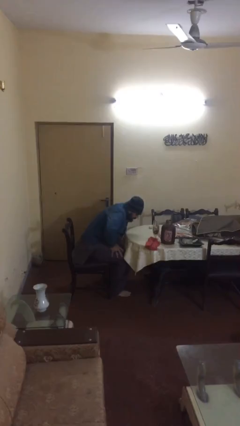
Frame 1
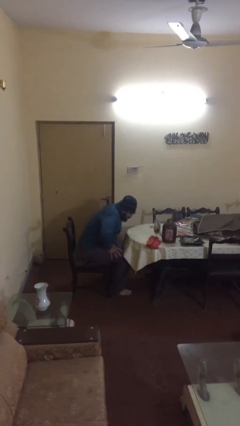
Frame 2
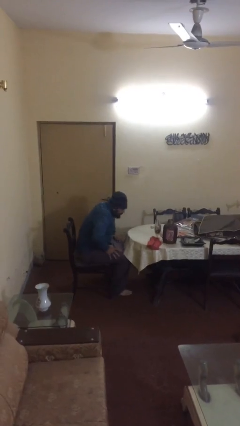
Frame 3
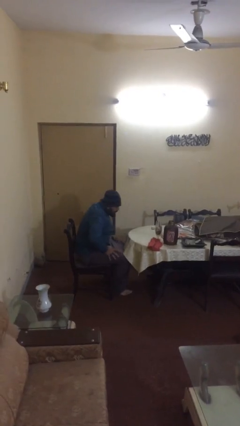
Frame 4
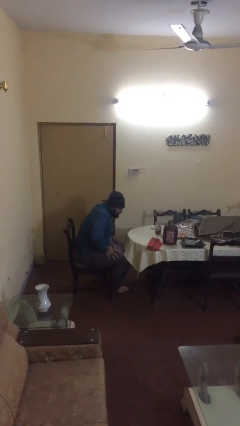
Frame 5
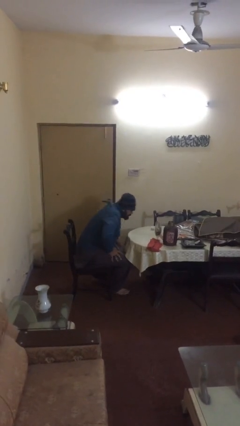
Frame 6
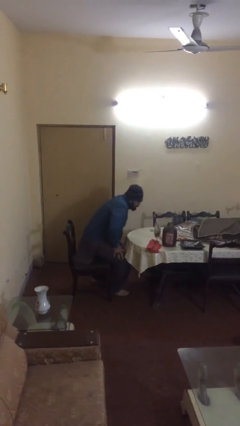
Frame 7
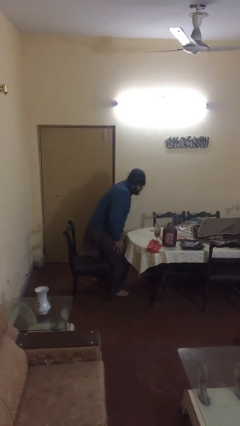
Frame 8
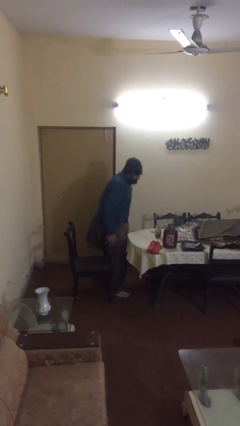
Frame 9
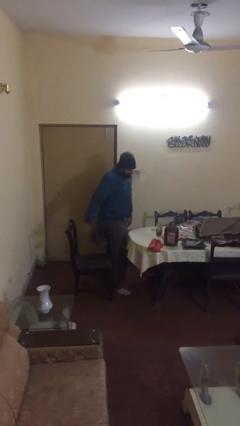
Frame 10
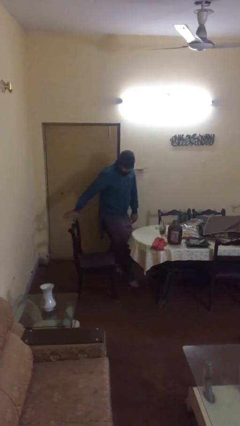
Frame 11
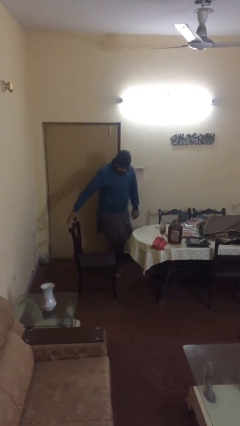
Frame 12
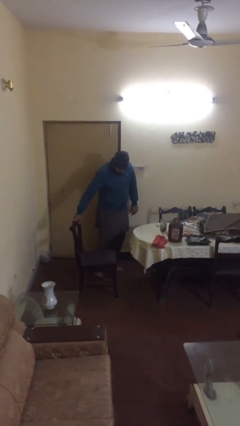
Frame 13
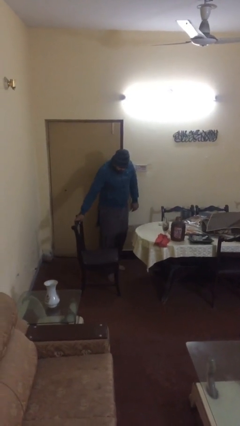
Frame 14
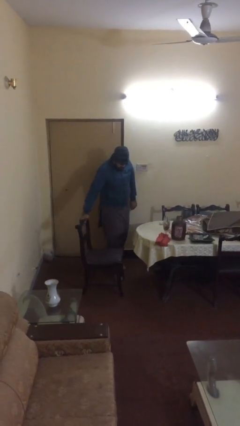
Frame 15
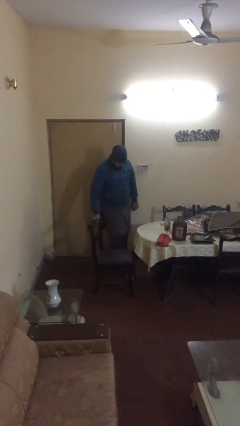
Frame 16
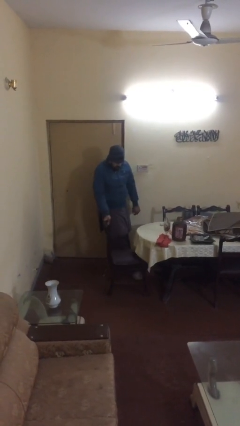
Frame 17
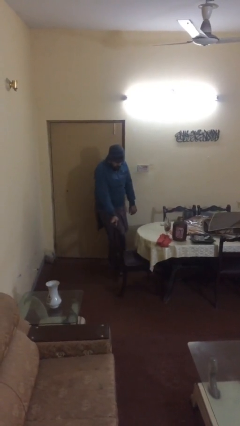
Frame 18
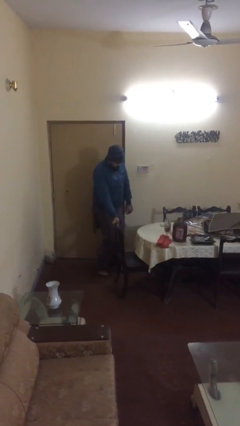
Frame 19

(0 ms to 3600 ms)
person stands up

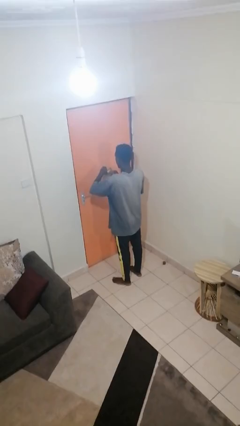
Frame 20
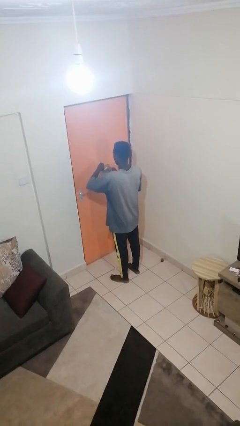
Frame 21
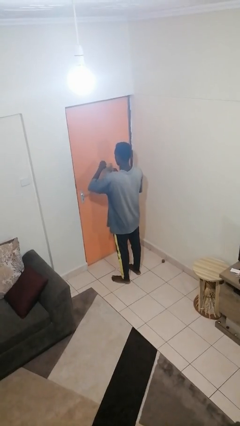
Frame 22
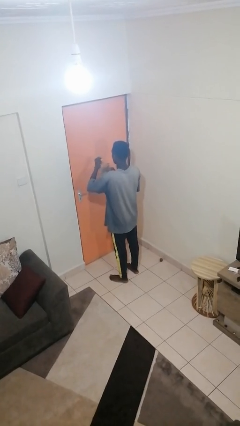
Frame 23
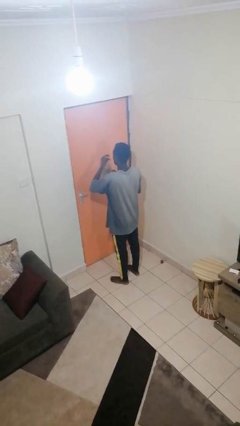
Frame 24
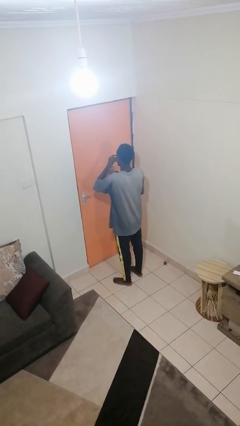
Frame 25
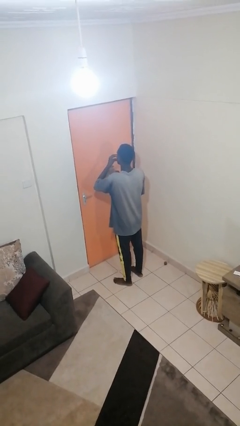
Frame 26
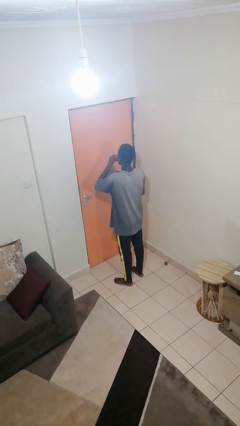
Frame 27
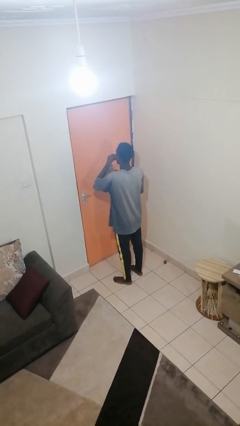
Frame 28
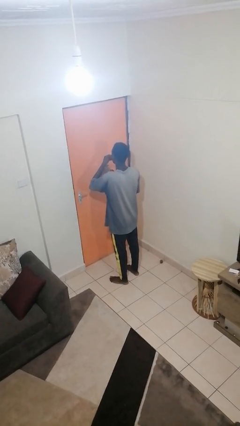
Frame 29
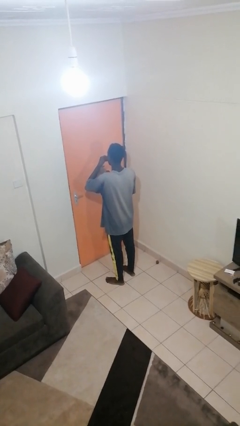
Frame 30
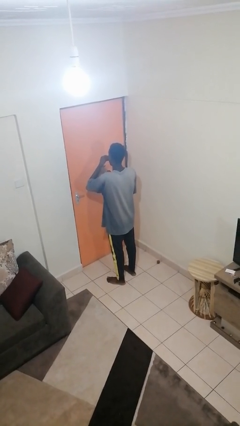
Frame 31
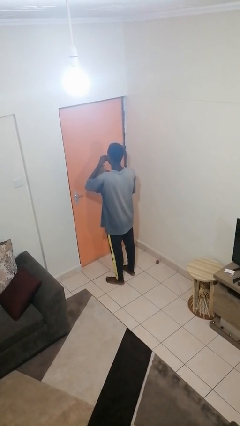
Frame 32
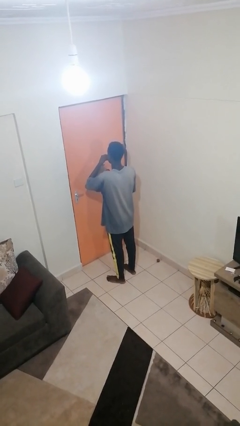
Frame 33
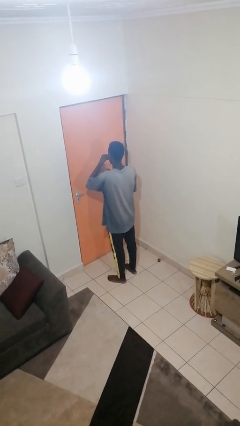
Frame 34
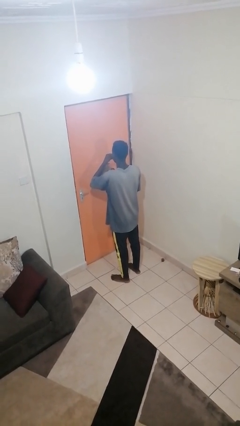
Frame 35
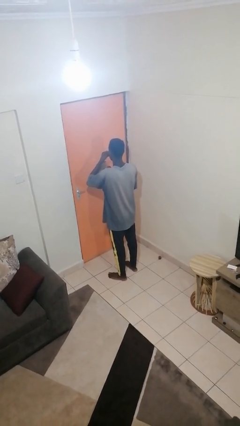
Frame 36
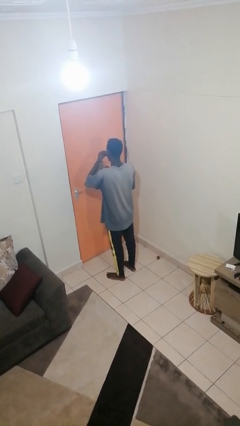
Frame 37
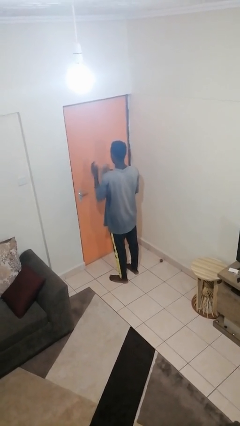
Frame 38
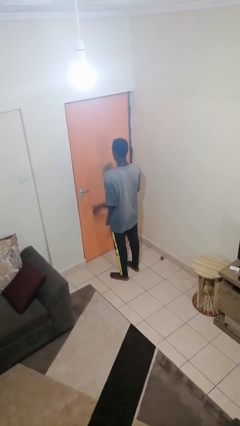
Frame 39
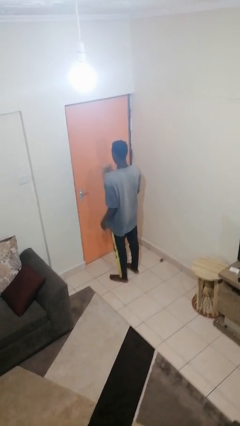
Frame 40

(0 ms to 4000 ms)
person eats snack from bag

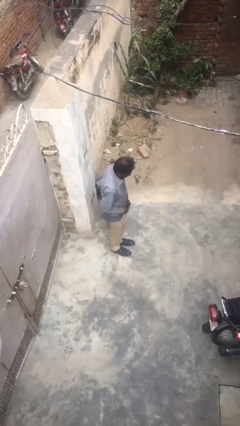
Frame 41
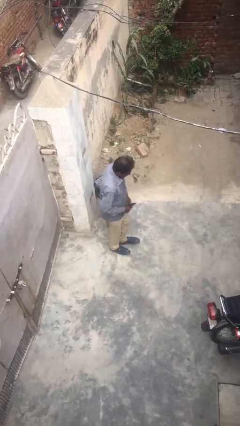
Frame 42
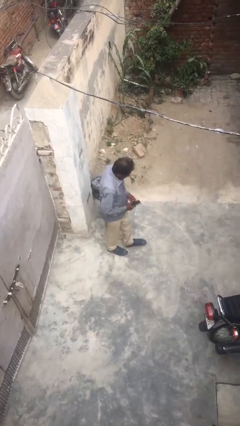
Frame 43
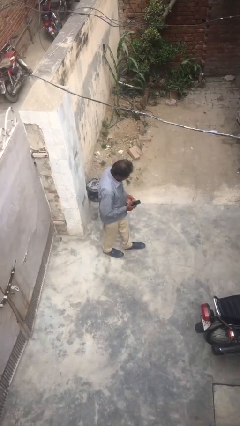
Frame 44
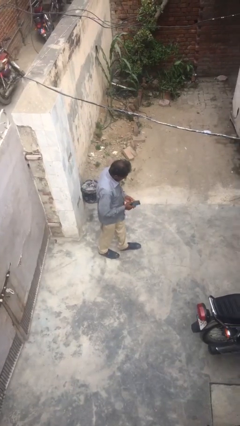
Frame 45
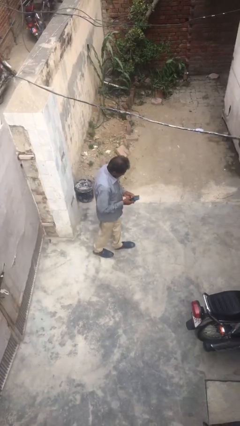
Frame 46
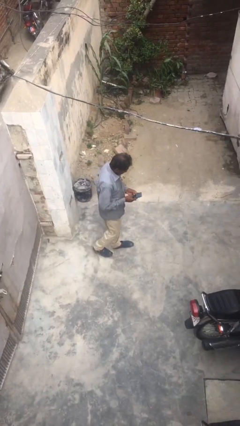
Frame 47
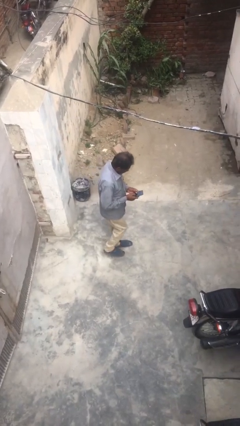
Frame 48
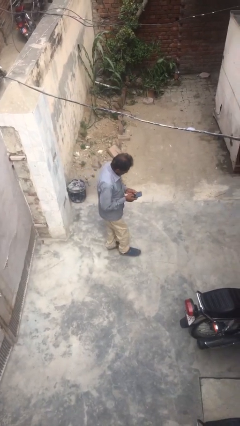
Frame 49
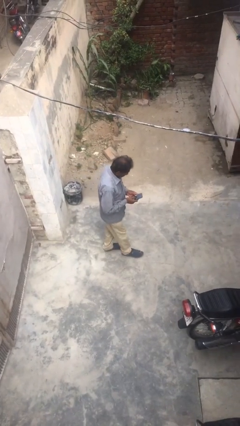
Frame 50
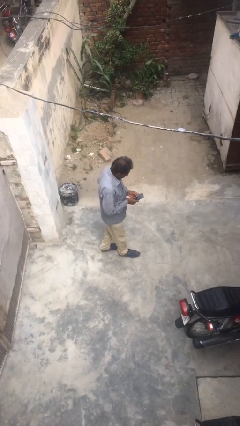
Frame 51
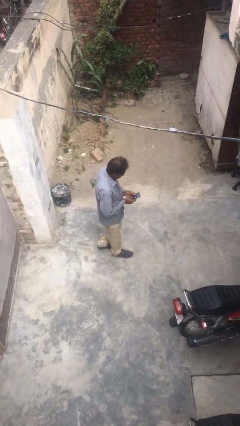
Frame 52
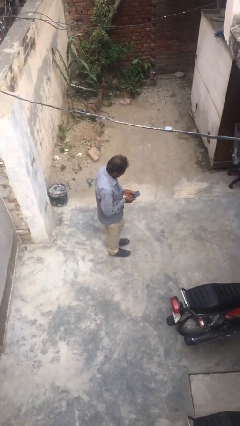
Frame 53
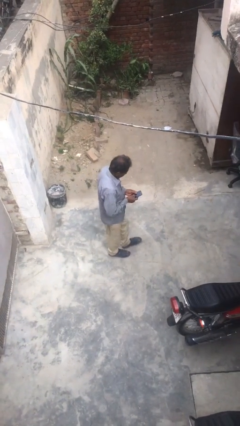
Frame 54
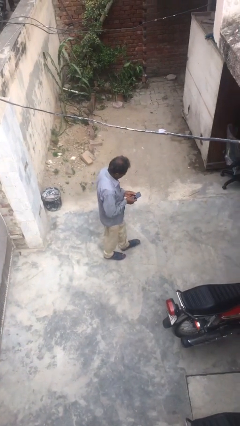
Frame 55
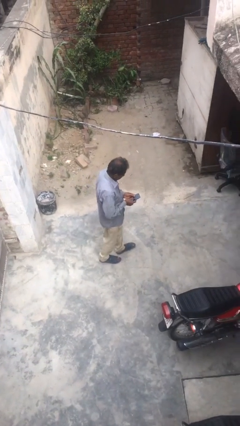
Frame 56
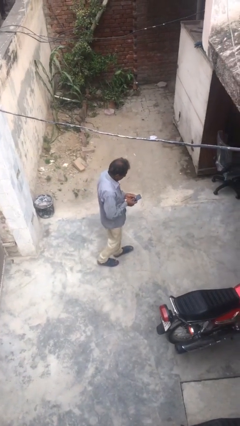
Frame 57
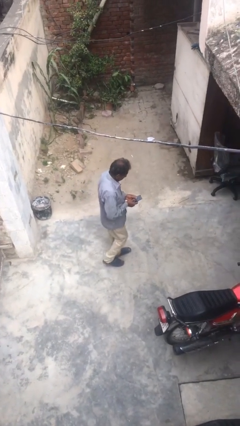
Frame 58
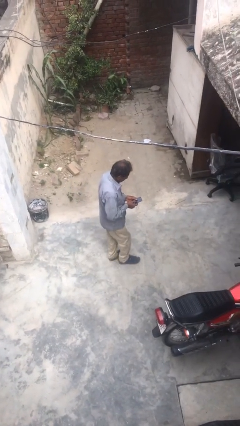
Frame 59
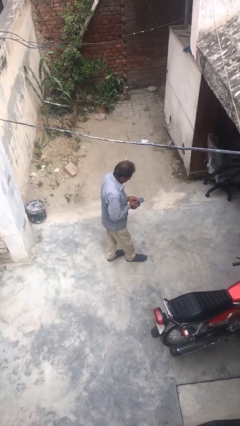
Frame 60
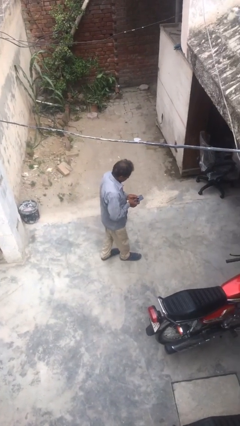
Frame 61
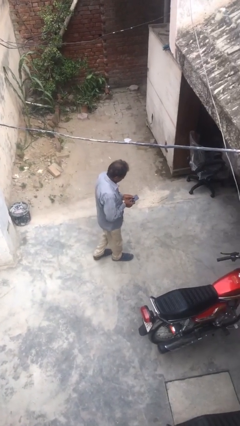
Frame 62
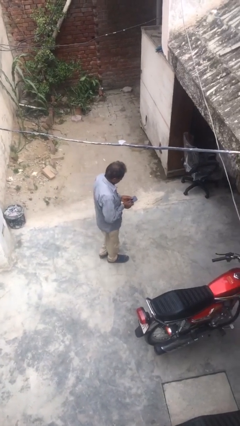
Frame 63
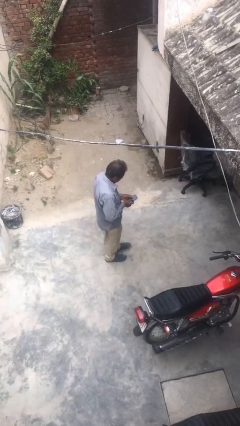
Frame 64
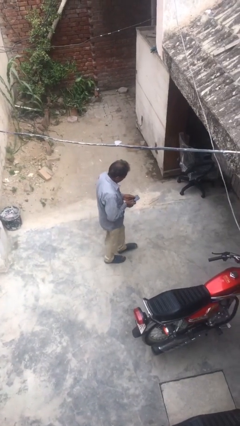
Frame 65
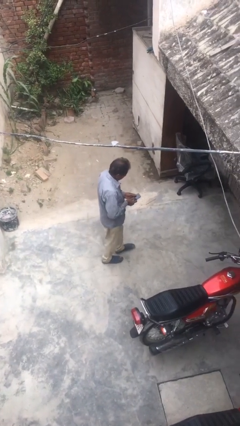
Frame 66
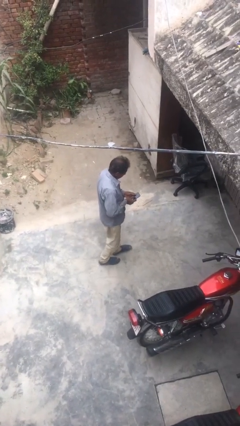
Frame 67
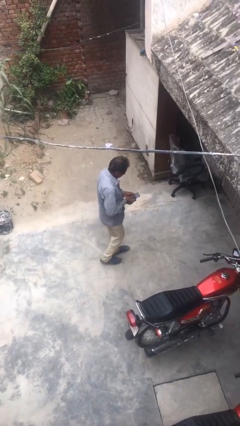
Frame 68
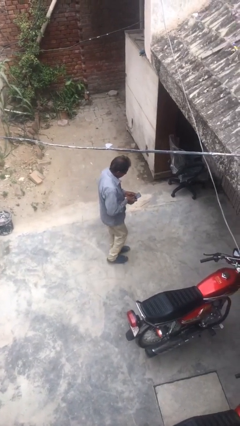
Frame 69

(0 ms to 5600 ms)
person texts on phone

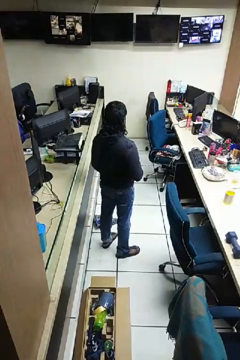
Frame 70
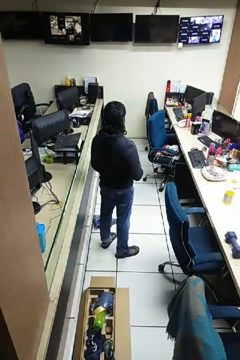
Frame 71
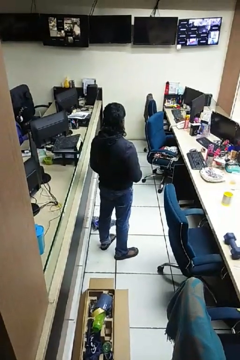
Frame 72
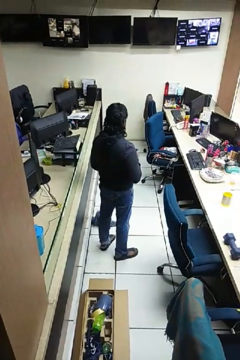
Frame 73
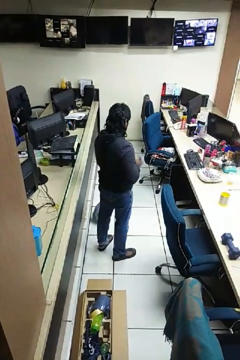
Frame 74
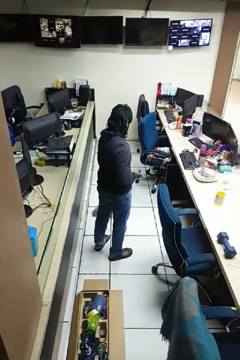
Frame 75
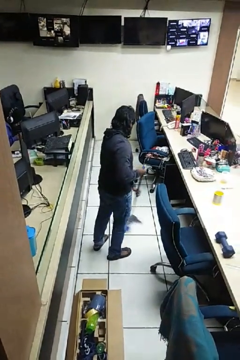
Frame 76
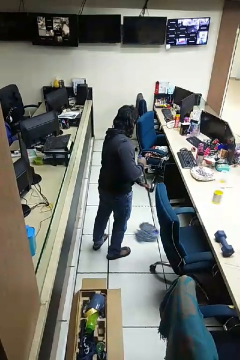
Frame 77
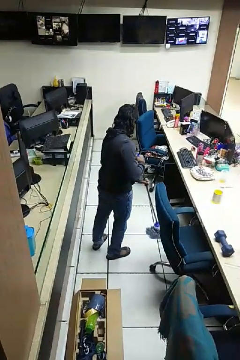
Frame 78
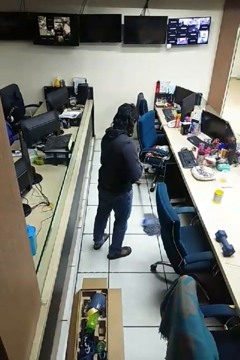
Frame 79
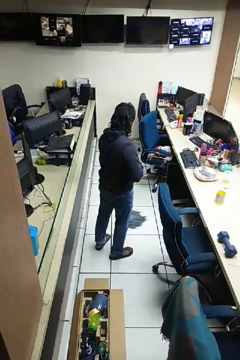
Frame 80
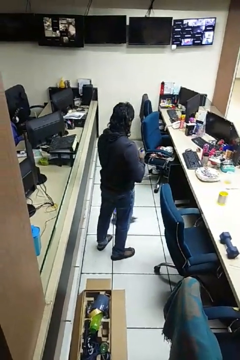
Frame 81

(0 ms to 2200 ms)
person mops

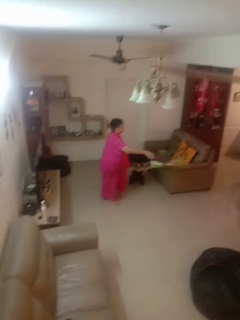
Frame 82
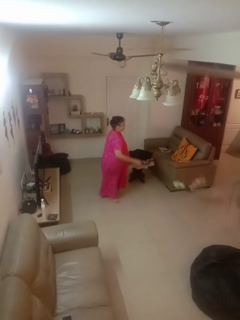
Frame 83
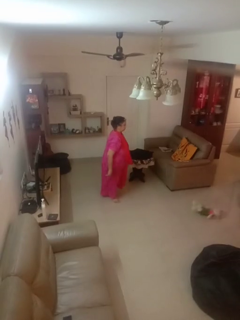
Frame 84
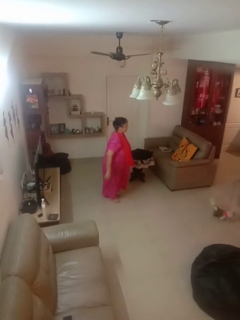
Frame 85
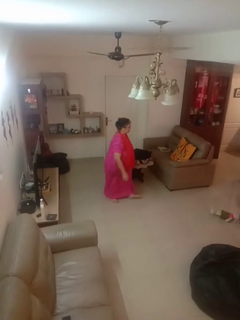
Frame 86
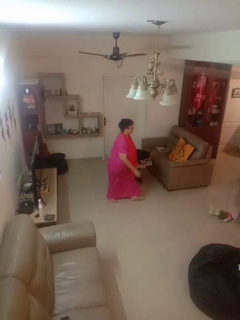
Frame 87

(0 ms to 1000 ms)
person throws object to ground

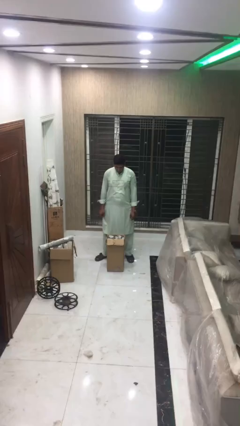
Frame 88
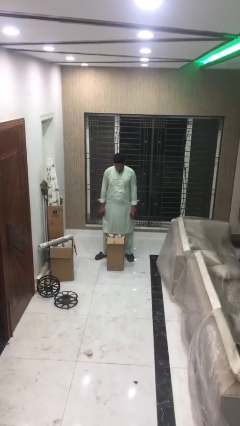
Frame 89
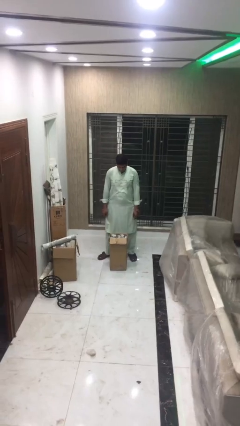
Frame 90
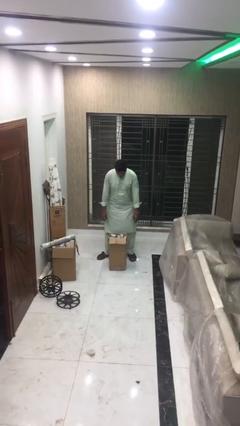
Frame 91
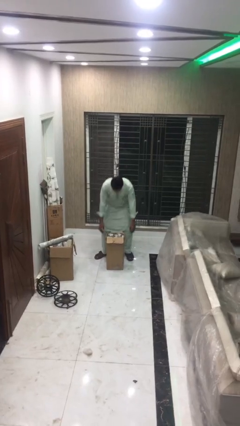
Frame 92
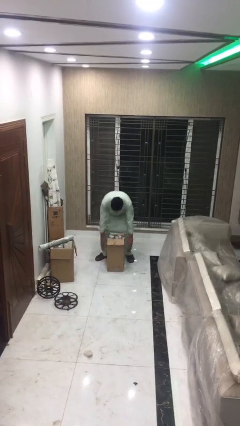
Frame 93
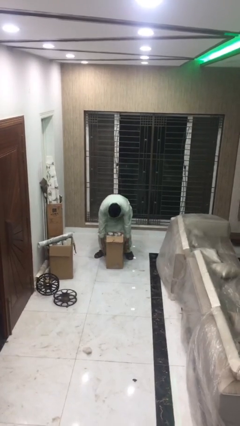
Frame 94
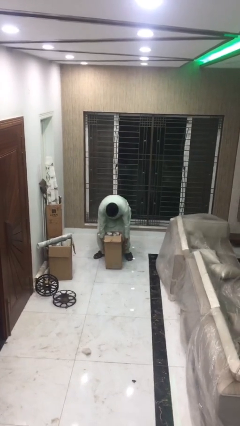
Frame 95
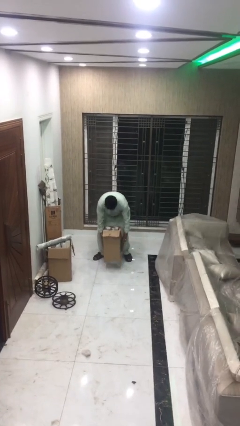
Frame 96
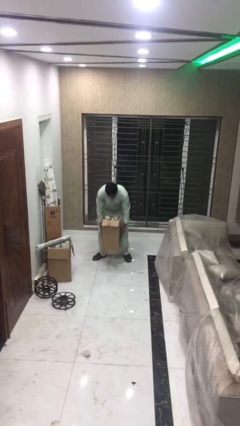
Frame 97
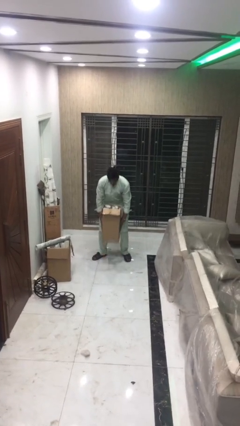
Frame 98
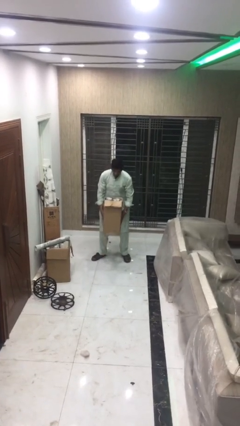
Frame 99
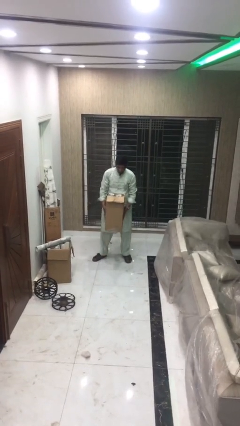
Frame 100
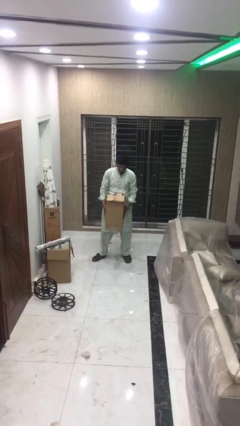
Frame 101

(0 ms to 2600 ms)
person picks up object from floor
